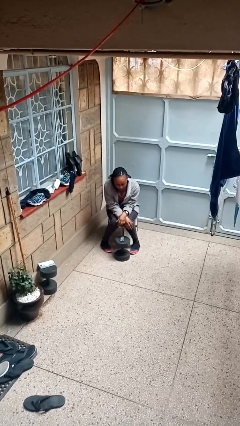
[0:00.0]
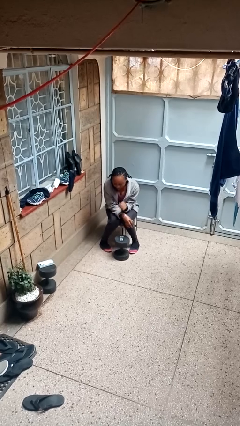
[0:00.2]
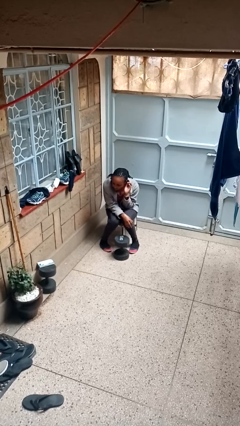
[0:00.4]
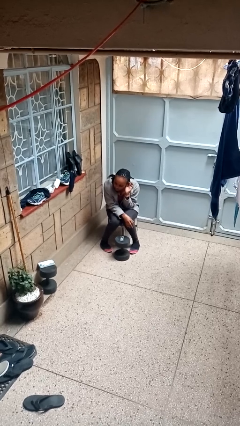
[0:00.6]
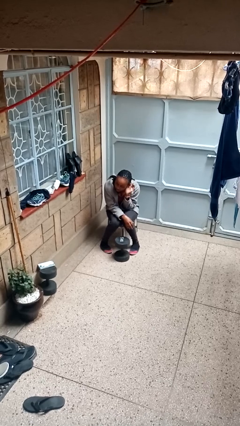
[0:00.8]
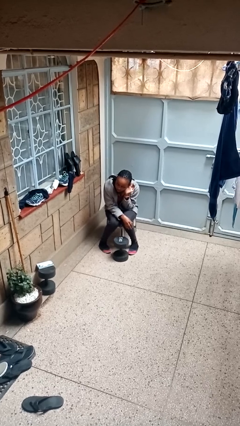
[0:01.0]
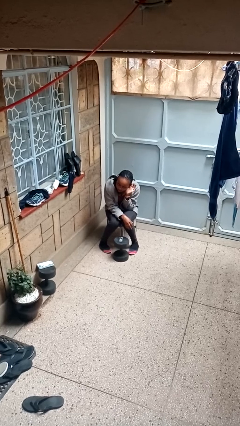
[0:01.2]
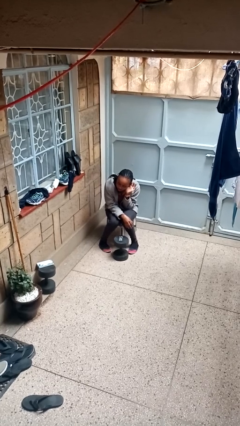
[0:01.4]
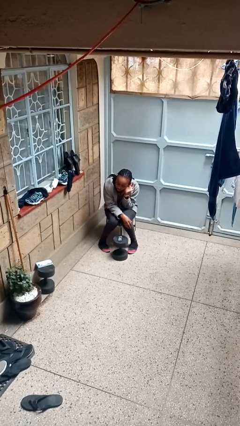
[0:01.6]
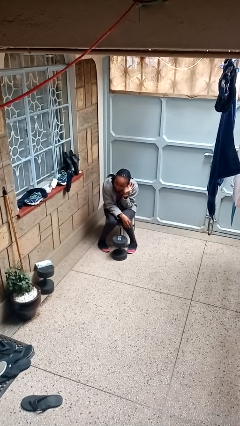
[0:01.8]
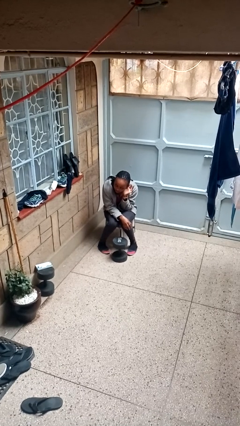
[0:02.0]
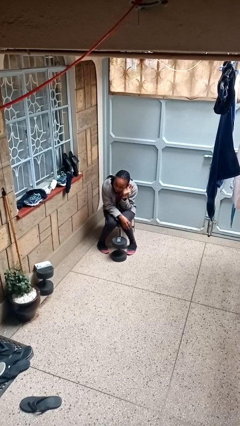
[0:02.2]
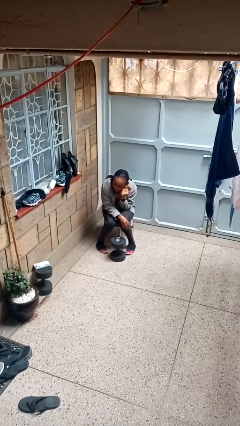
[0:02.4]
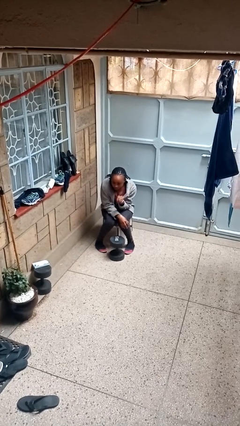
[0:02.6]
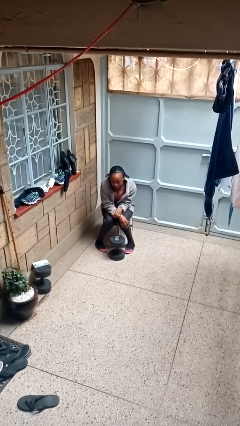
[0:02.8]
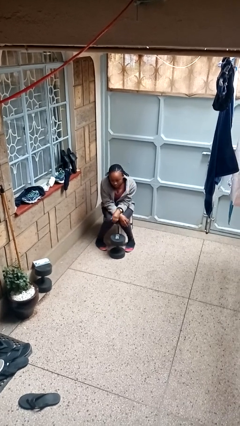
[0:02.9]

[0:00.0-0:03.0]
person gestures listen closely

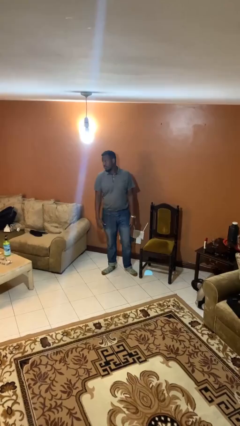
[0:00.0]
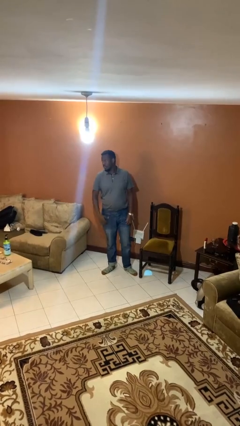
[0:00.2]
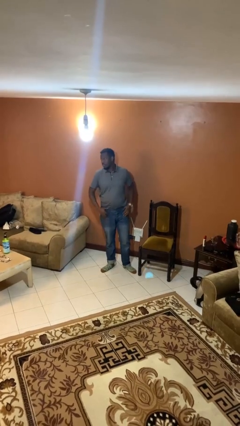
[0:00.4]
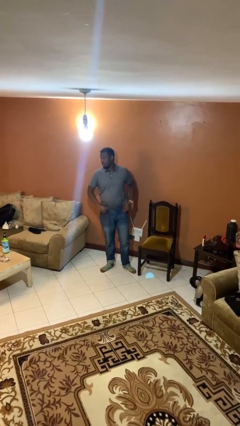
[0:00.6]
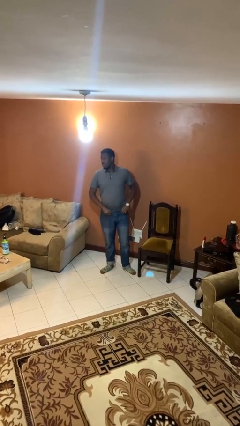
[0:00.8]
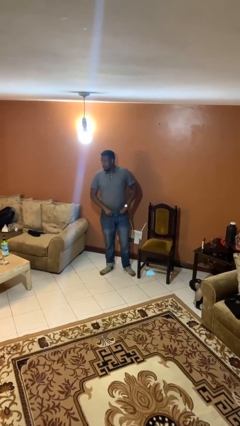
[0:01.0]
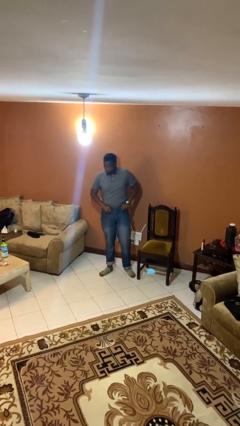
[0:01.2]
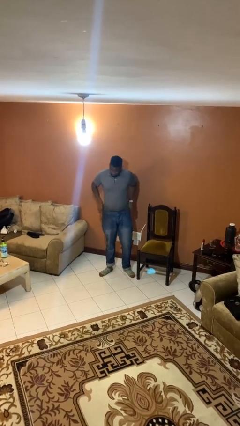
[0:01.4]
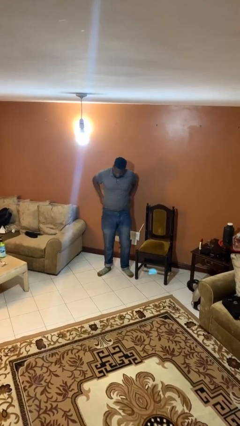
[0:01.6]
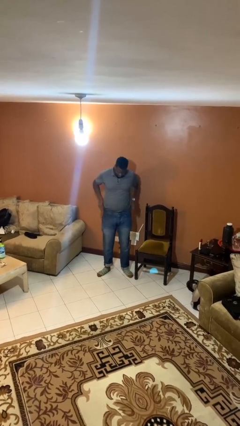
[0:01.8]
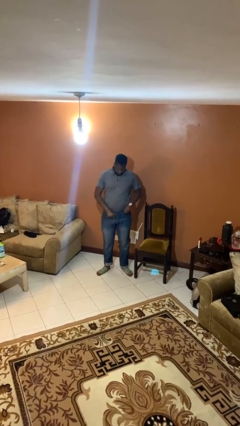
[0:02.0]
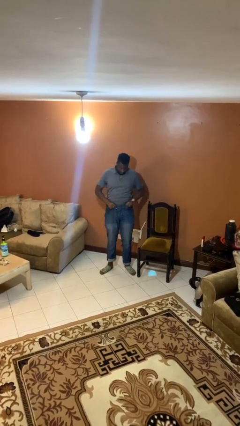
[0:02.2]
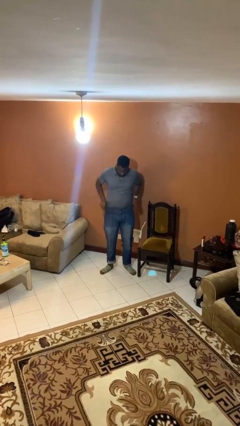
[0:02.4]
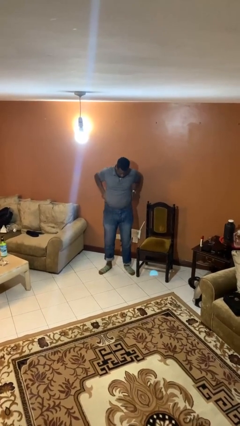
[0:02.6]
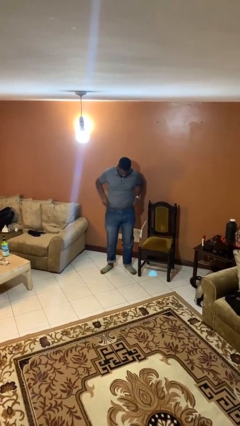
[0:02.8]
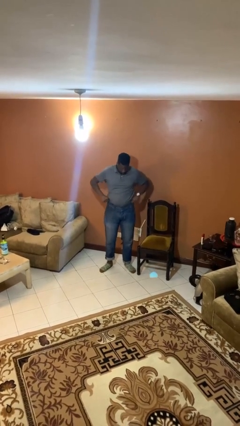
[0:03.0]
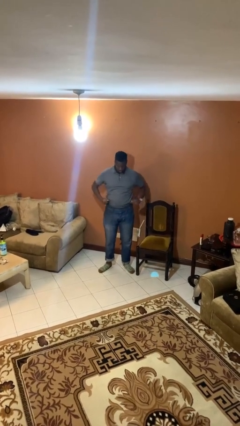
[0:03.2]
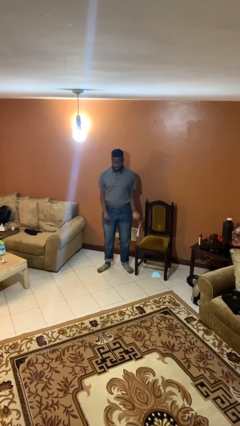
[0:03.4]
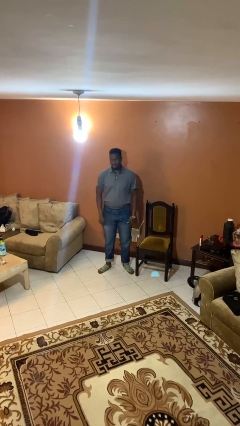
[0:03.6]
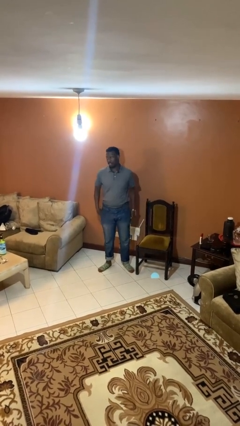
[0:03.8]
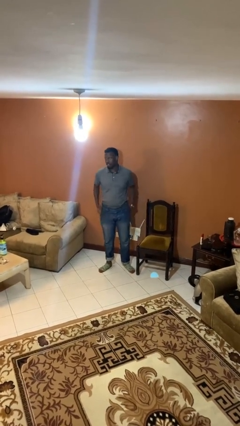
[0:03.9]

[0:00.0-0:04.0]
person hikes up pants

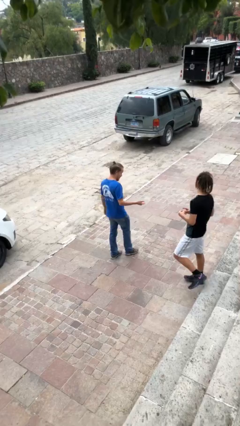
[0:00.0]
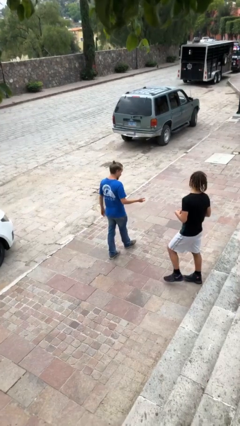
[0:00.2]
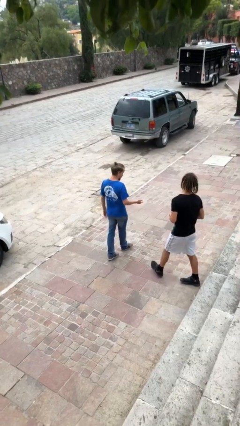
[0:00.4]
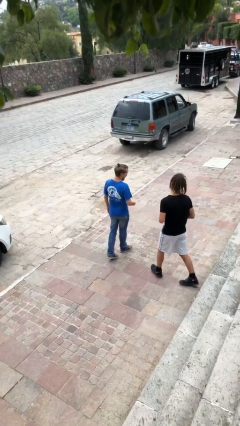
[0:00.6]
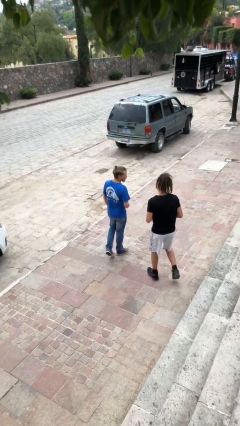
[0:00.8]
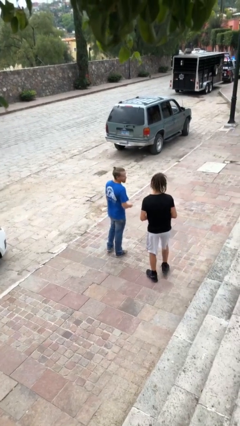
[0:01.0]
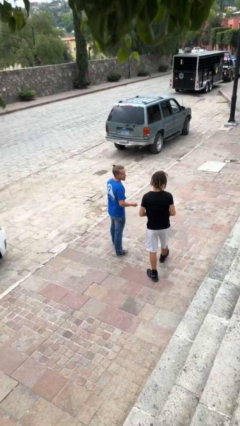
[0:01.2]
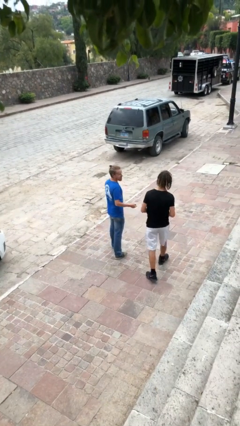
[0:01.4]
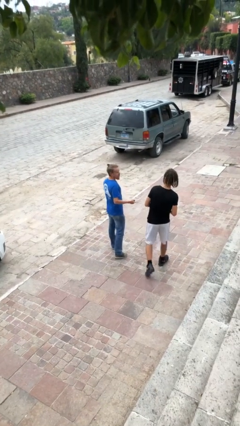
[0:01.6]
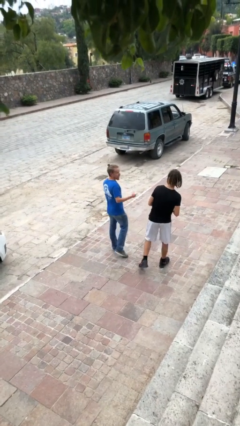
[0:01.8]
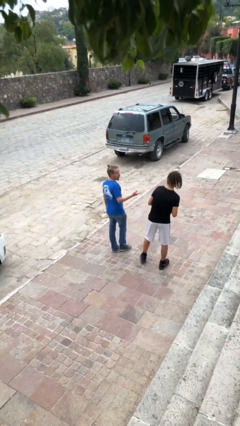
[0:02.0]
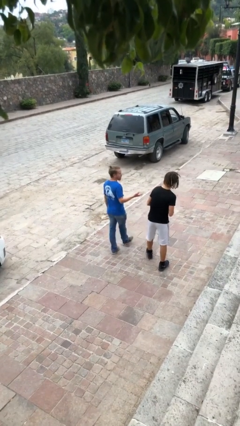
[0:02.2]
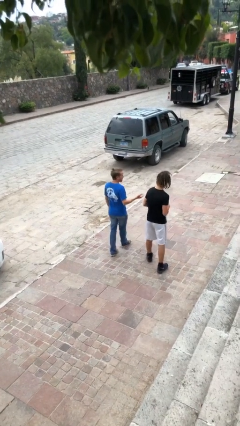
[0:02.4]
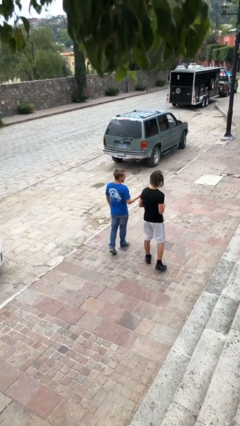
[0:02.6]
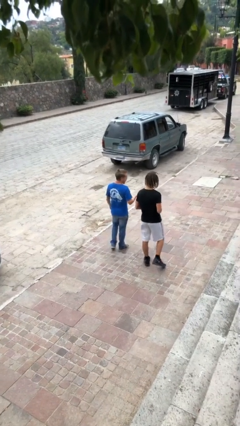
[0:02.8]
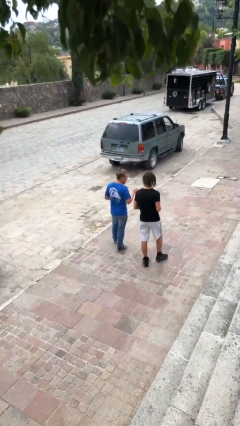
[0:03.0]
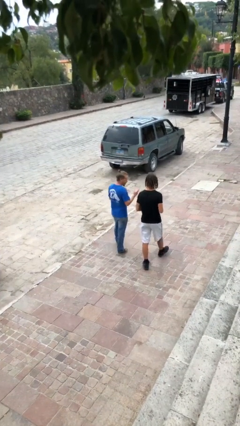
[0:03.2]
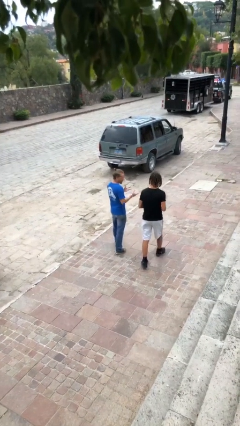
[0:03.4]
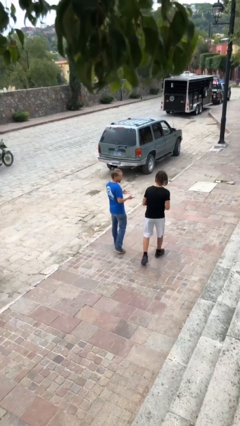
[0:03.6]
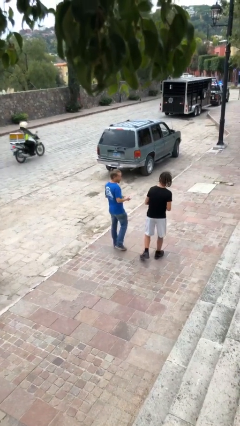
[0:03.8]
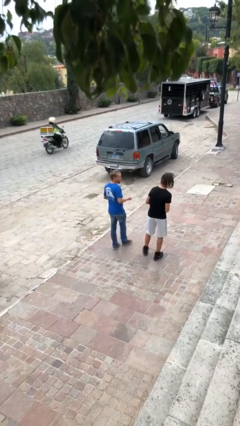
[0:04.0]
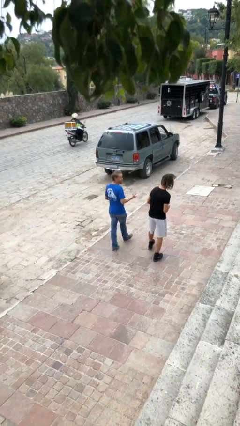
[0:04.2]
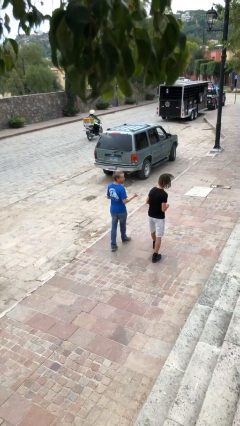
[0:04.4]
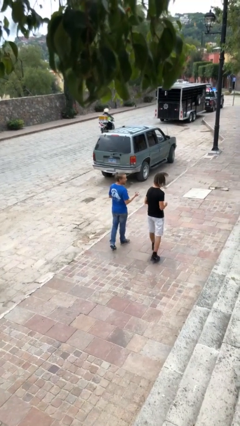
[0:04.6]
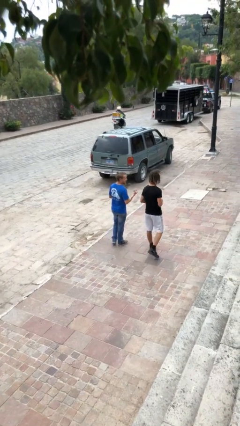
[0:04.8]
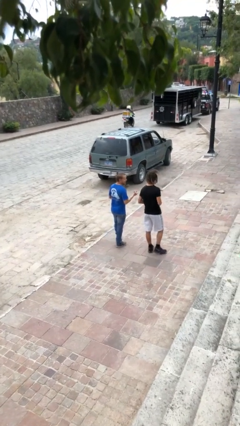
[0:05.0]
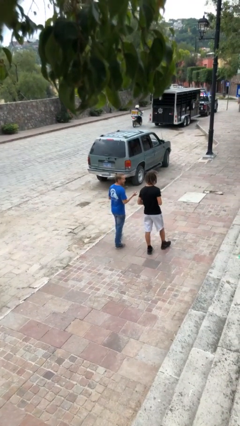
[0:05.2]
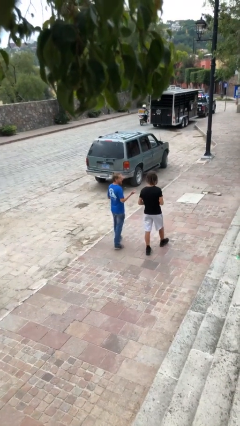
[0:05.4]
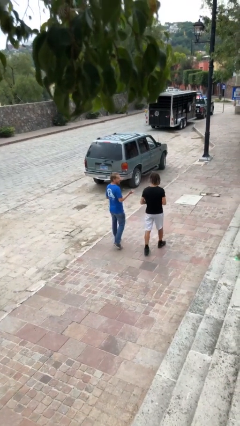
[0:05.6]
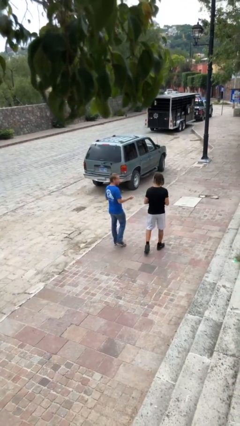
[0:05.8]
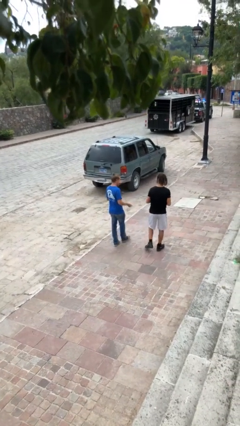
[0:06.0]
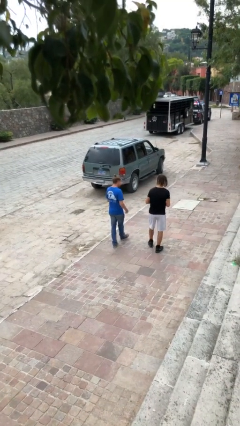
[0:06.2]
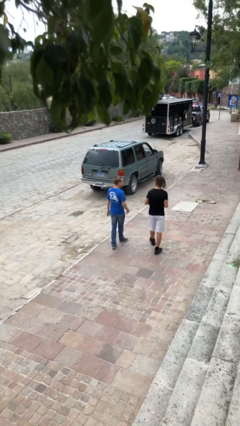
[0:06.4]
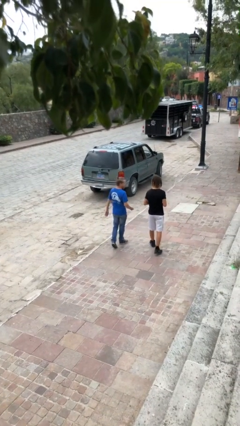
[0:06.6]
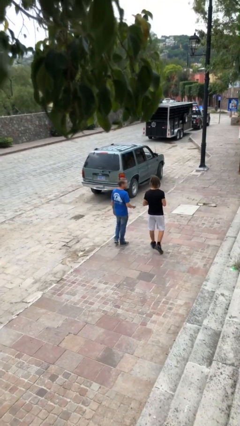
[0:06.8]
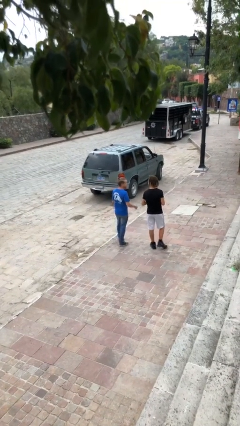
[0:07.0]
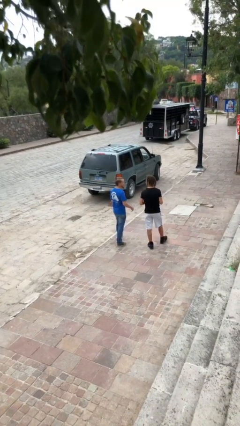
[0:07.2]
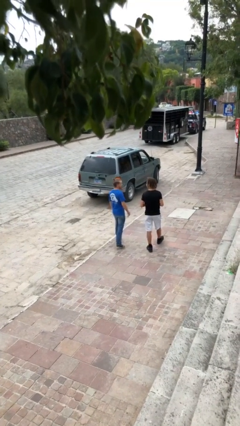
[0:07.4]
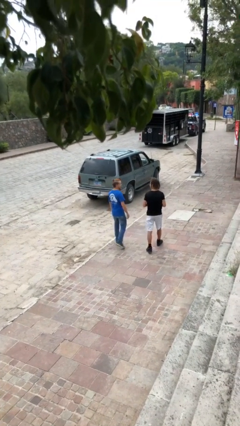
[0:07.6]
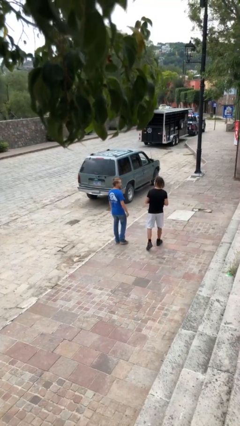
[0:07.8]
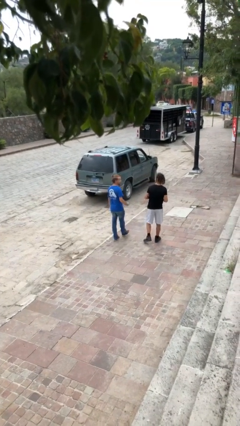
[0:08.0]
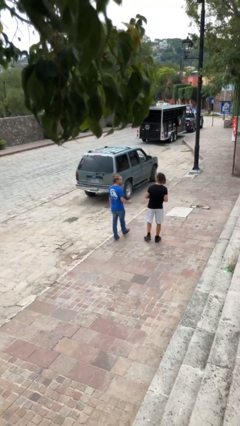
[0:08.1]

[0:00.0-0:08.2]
person talks to person

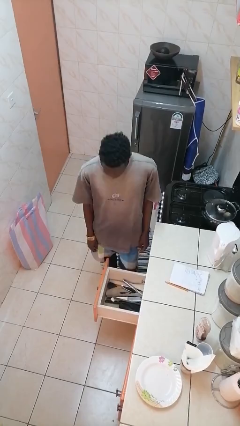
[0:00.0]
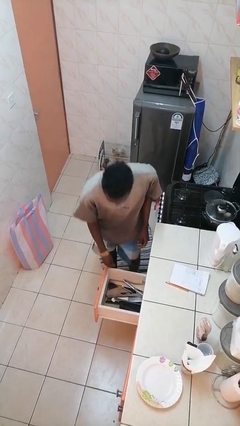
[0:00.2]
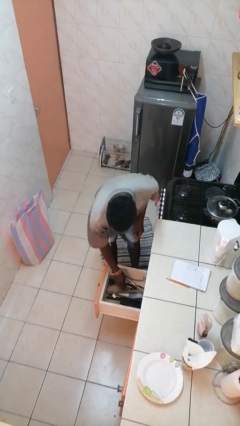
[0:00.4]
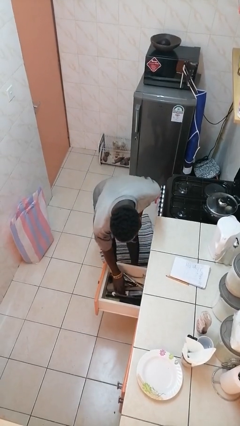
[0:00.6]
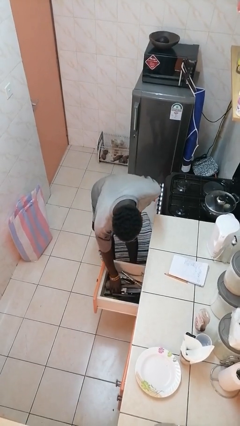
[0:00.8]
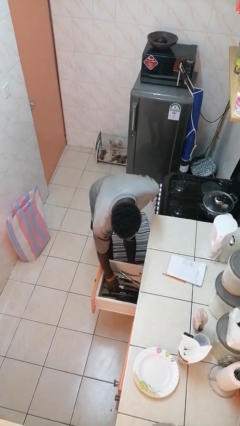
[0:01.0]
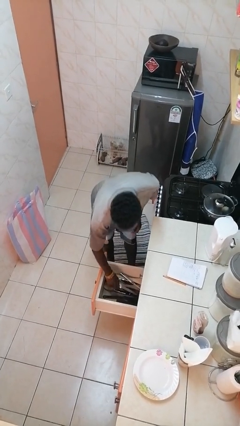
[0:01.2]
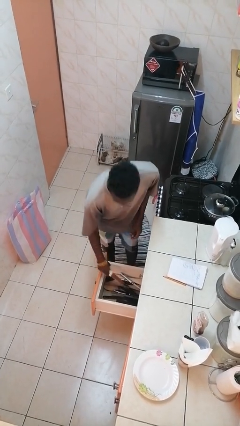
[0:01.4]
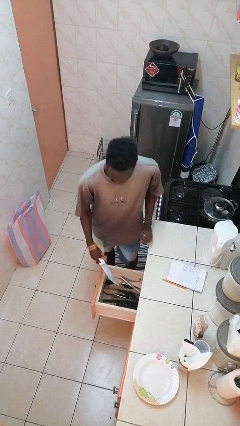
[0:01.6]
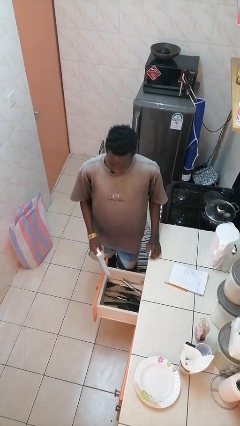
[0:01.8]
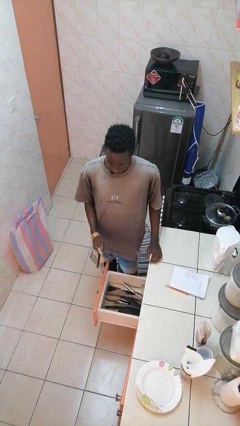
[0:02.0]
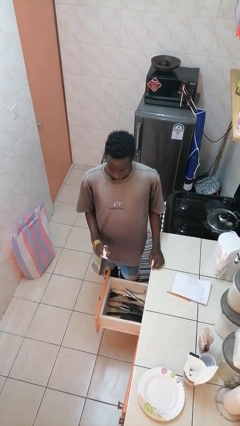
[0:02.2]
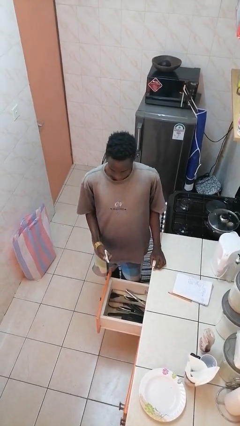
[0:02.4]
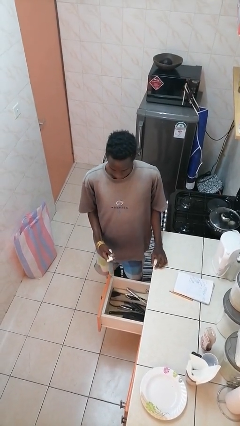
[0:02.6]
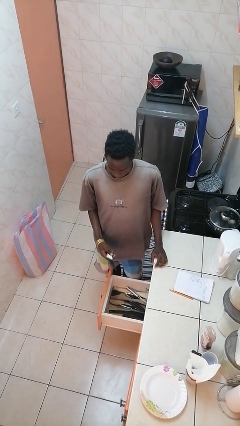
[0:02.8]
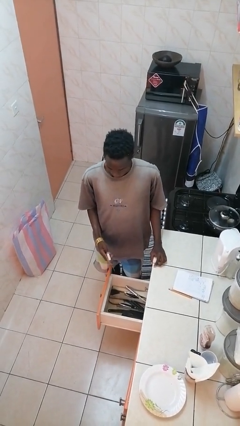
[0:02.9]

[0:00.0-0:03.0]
person takes object from kitchen drawer
